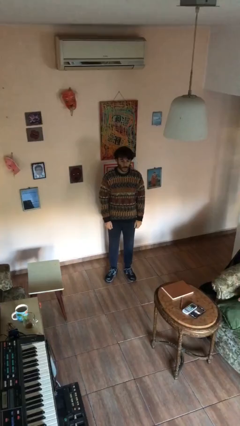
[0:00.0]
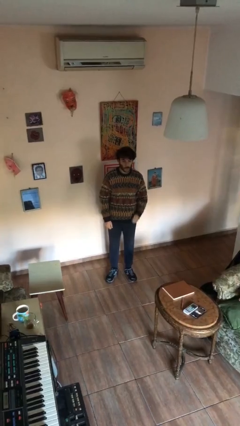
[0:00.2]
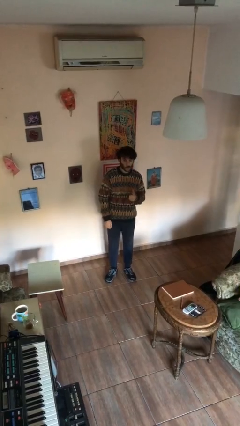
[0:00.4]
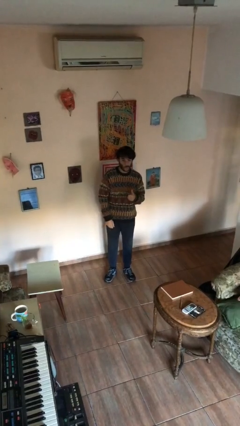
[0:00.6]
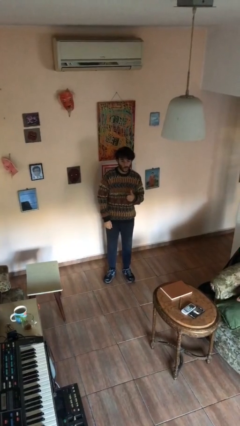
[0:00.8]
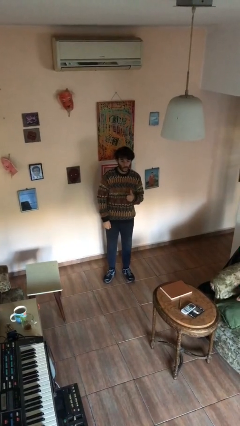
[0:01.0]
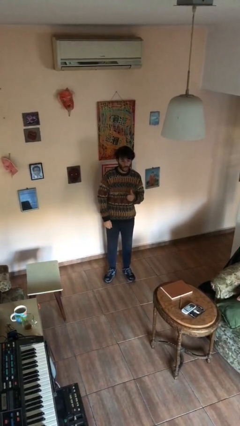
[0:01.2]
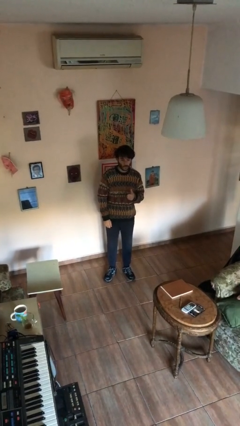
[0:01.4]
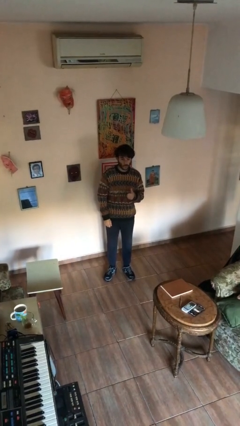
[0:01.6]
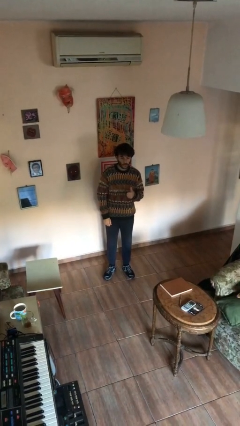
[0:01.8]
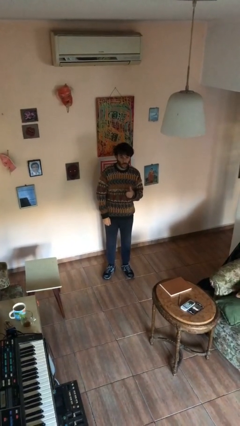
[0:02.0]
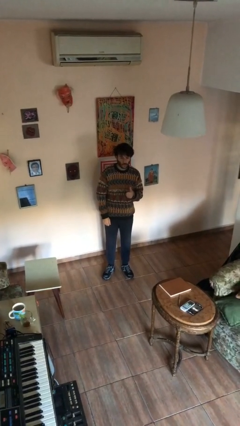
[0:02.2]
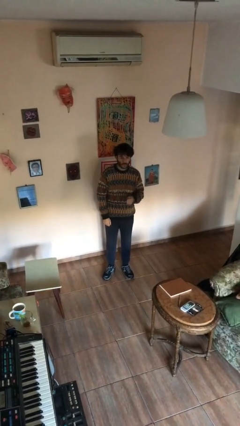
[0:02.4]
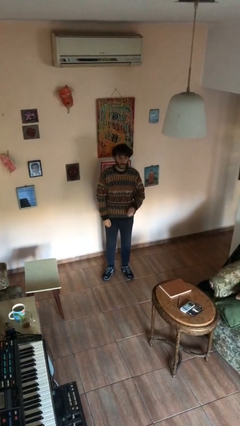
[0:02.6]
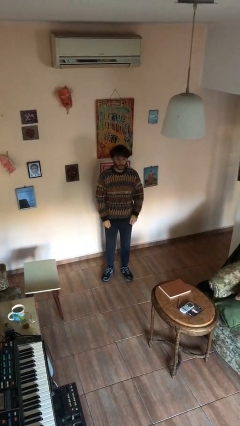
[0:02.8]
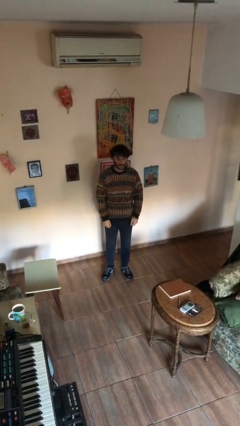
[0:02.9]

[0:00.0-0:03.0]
person gestures thumbs up

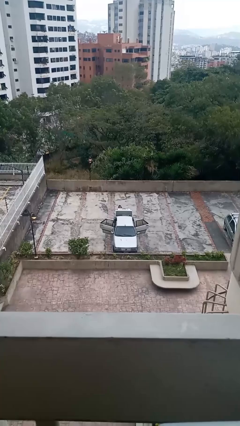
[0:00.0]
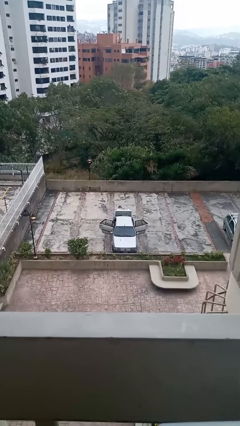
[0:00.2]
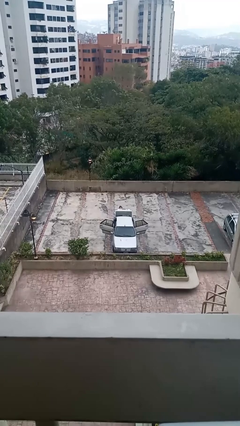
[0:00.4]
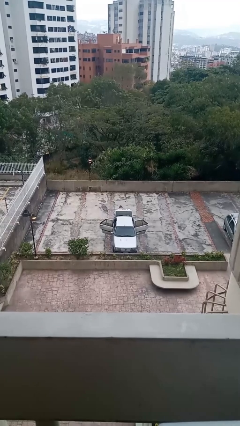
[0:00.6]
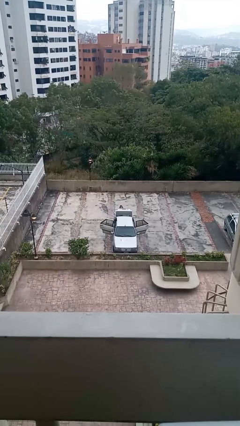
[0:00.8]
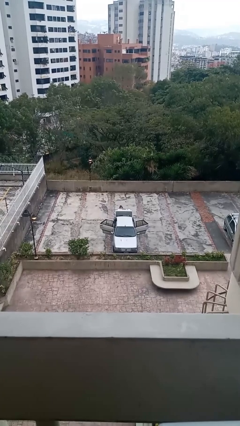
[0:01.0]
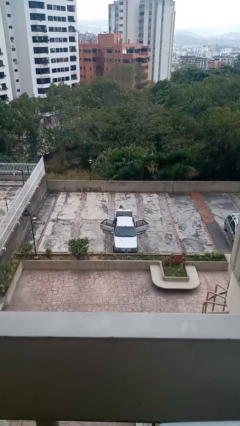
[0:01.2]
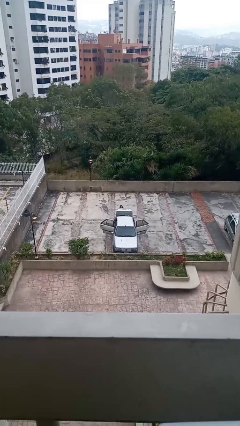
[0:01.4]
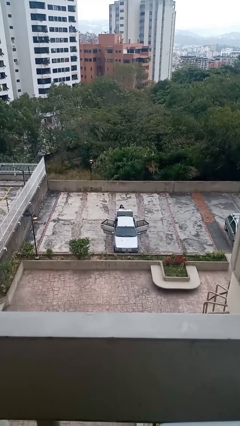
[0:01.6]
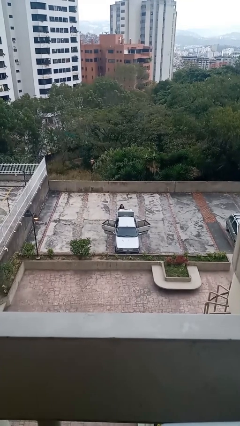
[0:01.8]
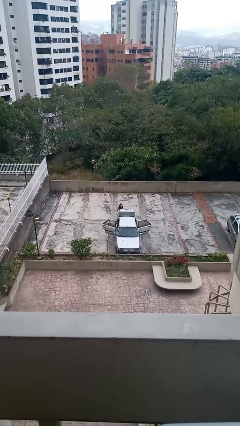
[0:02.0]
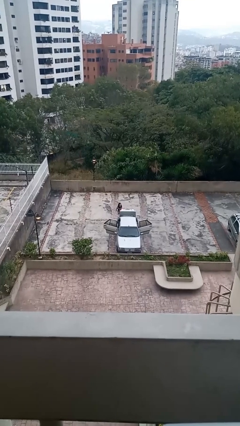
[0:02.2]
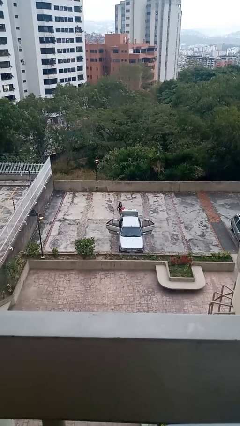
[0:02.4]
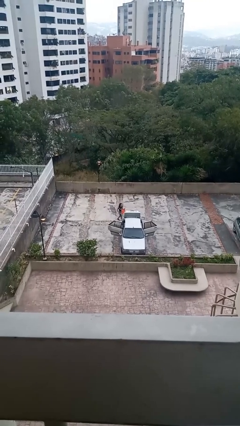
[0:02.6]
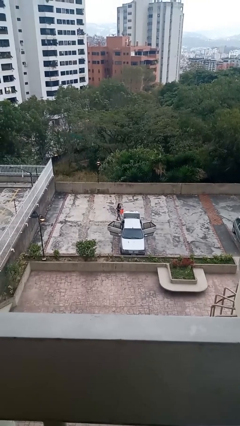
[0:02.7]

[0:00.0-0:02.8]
person unloads car

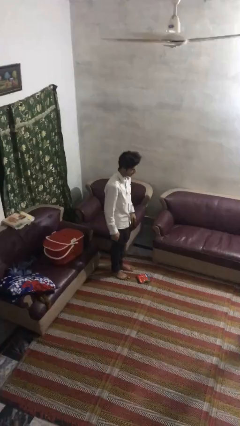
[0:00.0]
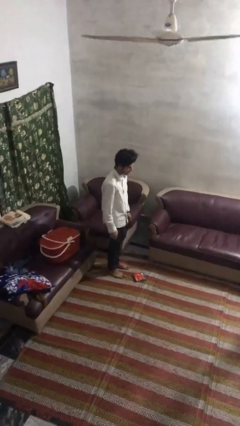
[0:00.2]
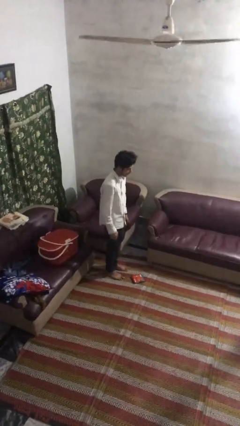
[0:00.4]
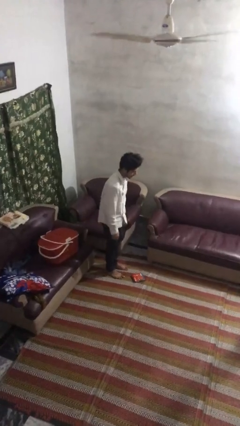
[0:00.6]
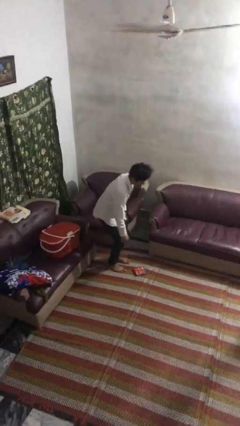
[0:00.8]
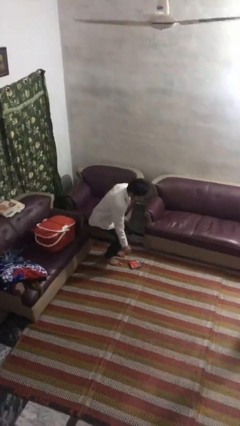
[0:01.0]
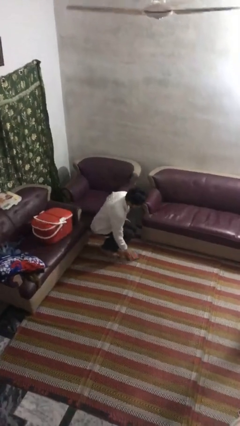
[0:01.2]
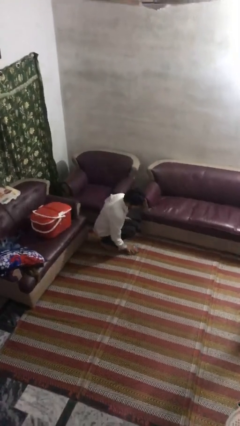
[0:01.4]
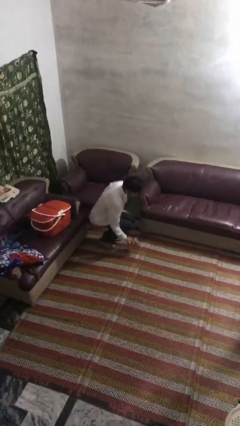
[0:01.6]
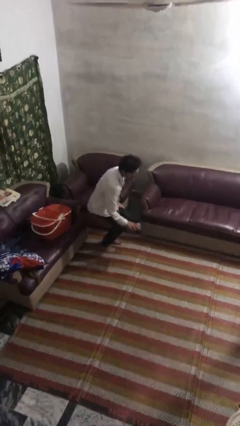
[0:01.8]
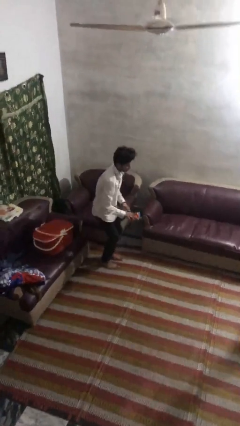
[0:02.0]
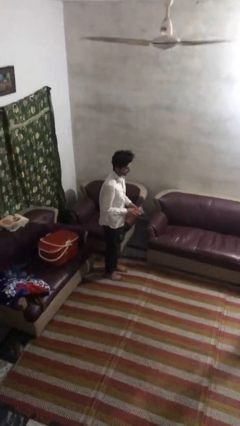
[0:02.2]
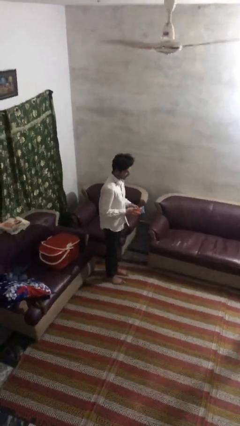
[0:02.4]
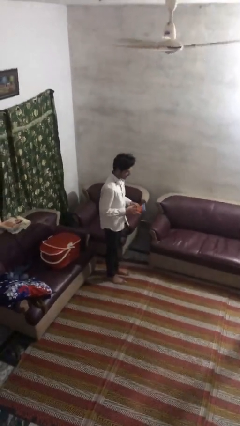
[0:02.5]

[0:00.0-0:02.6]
person picks up object from floor

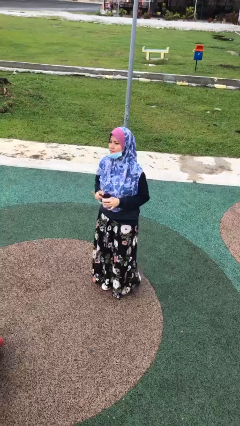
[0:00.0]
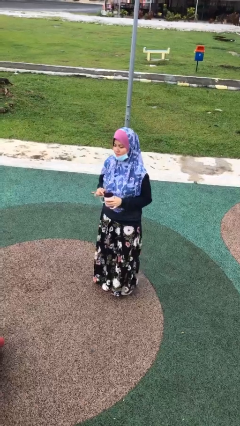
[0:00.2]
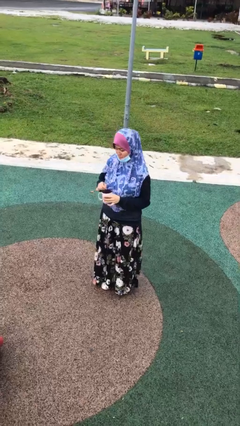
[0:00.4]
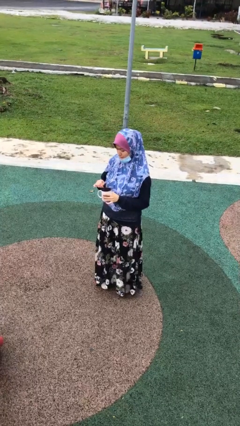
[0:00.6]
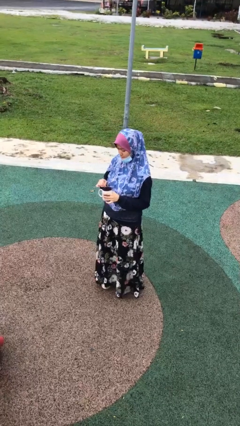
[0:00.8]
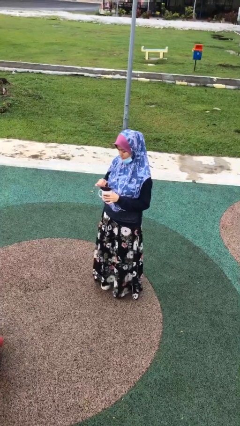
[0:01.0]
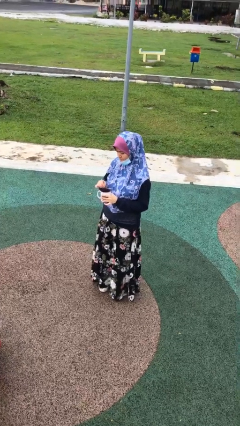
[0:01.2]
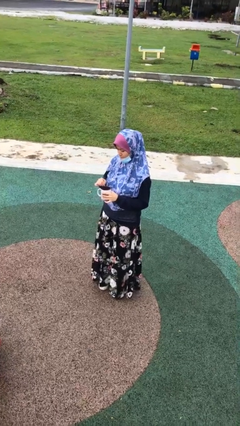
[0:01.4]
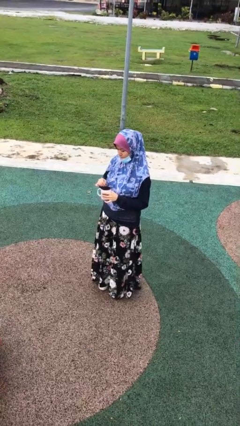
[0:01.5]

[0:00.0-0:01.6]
person stirs mug

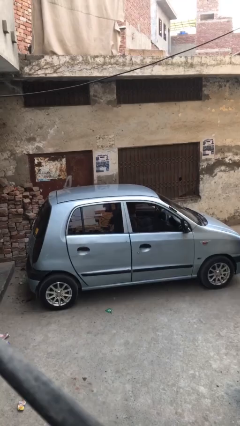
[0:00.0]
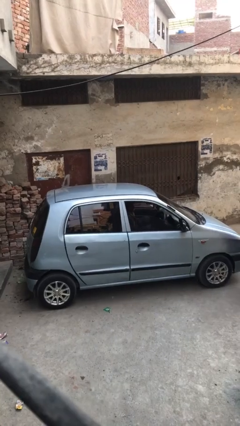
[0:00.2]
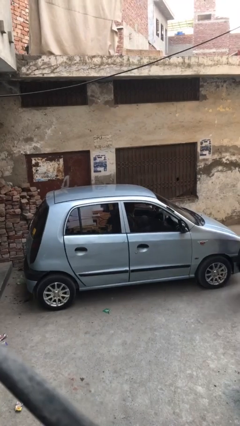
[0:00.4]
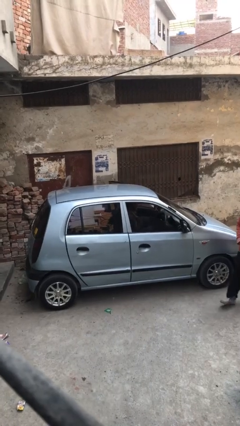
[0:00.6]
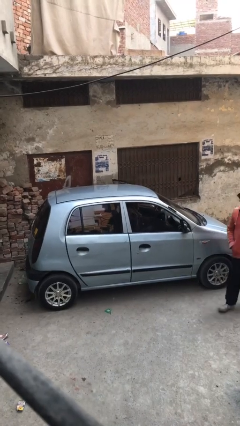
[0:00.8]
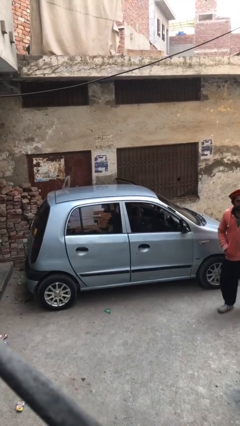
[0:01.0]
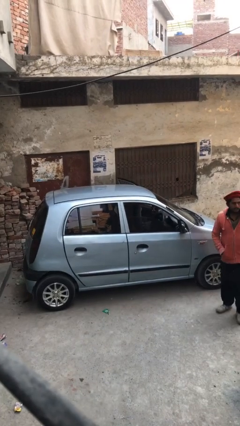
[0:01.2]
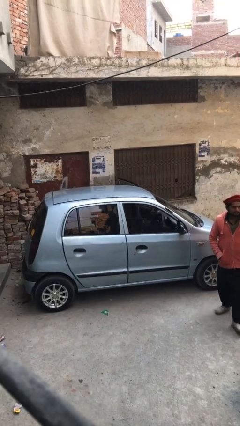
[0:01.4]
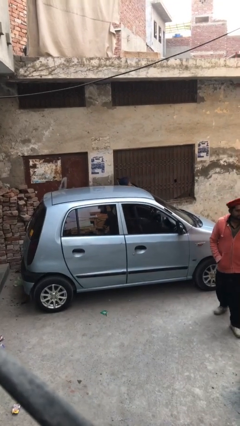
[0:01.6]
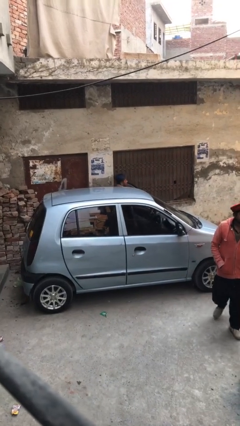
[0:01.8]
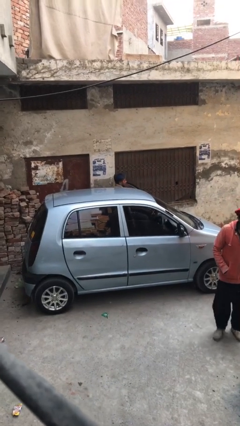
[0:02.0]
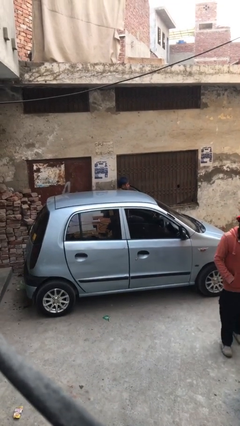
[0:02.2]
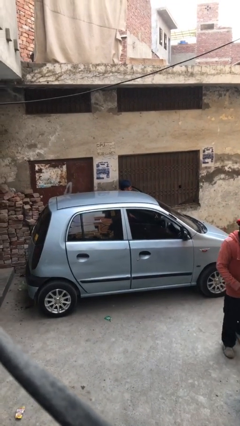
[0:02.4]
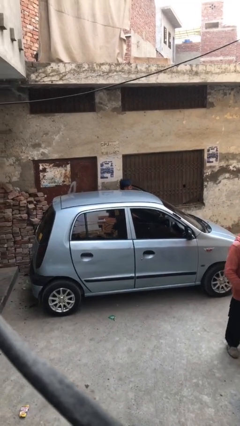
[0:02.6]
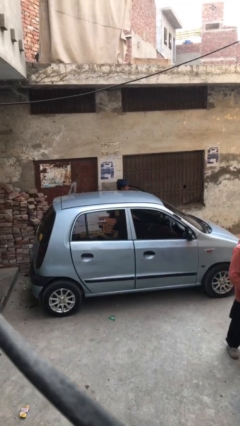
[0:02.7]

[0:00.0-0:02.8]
person exits car

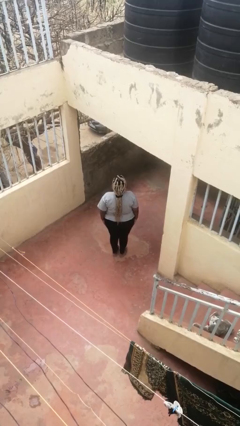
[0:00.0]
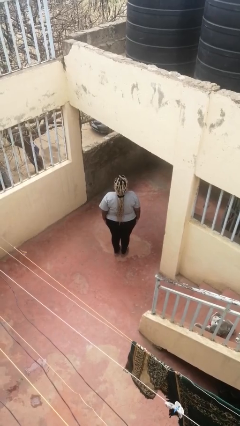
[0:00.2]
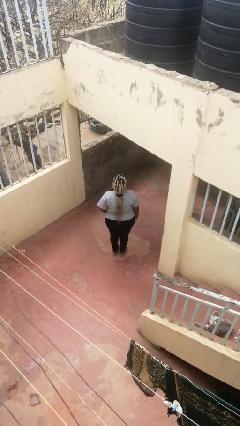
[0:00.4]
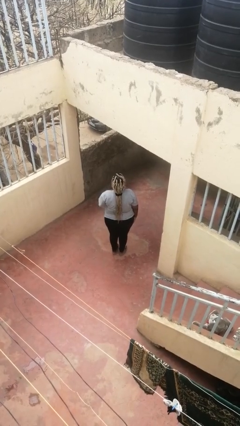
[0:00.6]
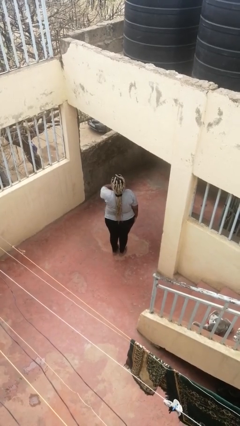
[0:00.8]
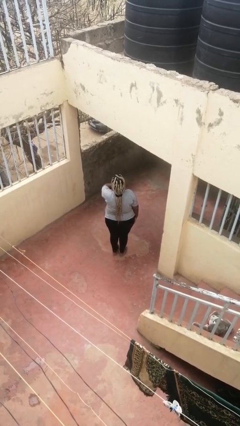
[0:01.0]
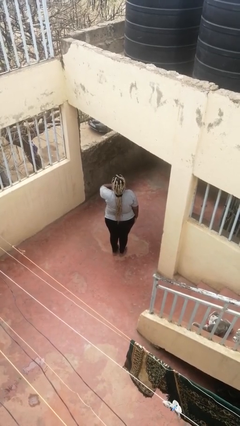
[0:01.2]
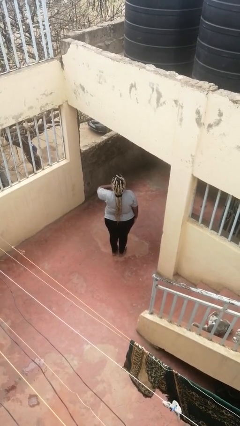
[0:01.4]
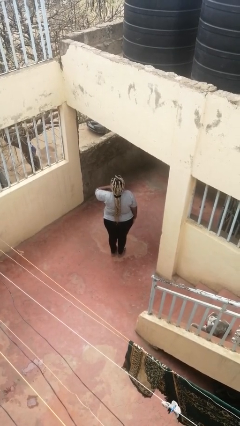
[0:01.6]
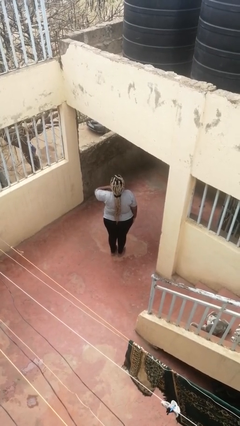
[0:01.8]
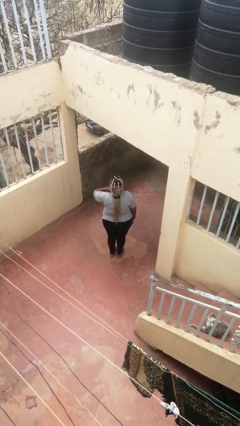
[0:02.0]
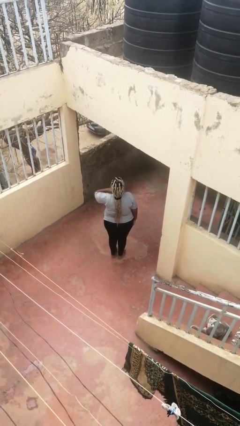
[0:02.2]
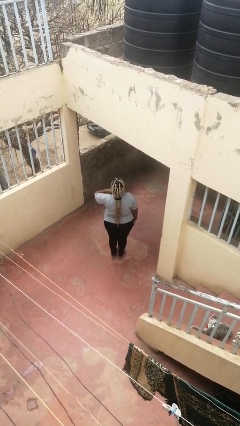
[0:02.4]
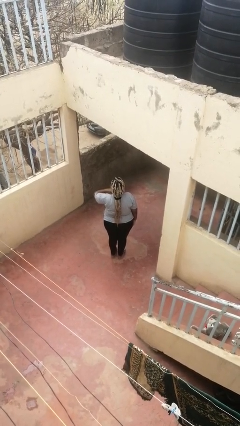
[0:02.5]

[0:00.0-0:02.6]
person gestures cut

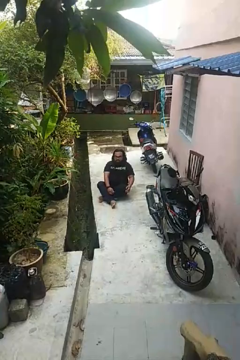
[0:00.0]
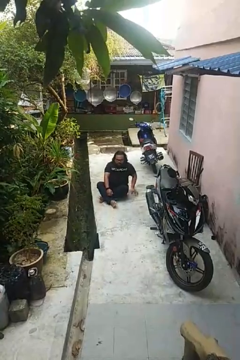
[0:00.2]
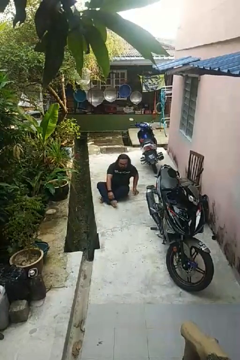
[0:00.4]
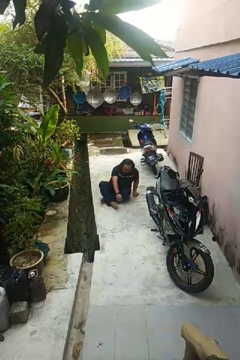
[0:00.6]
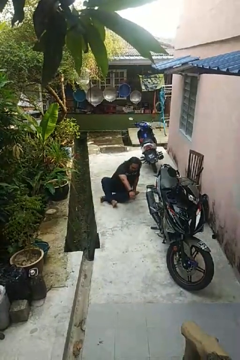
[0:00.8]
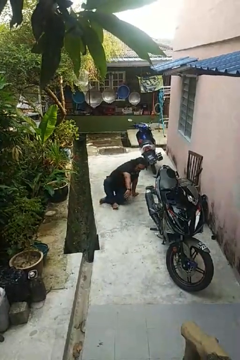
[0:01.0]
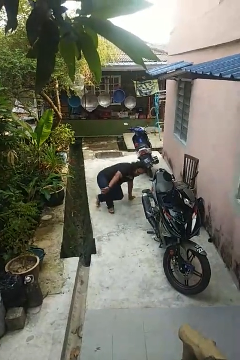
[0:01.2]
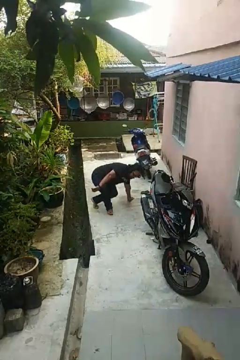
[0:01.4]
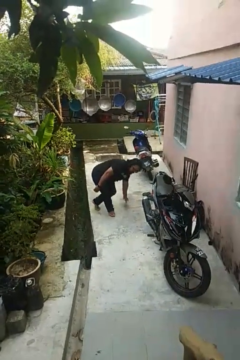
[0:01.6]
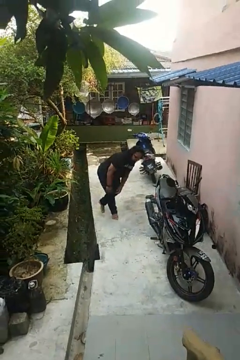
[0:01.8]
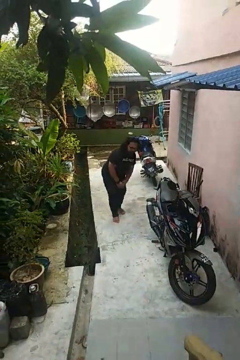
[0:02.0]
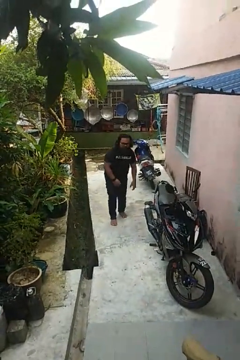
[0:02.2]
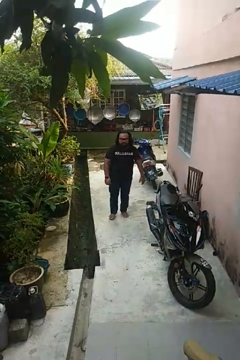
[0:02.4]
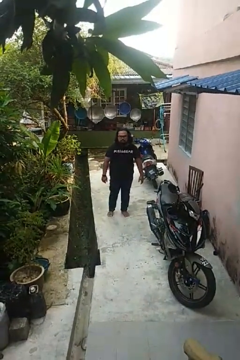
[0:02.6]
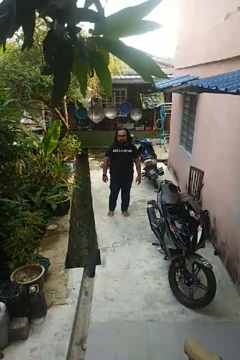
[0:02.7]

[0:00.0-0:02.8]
person stands up from floor
